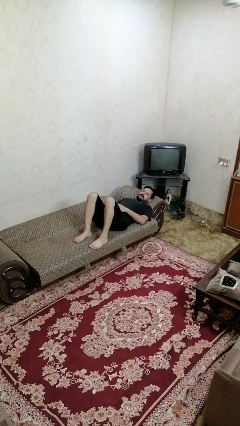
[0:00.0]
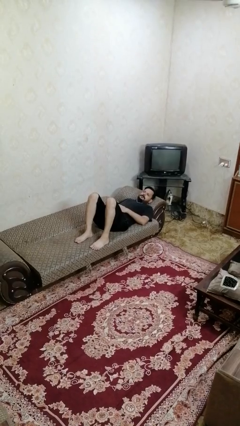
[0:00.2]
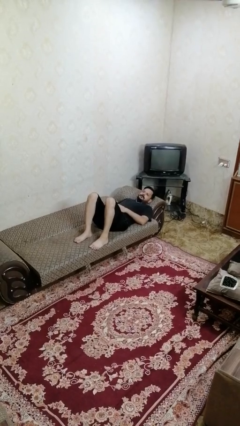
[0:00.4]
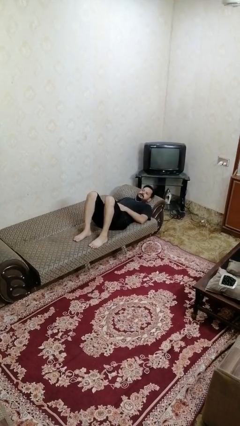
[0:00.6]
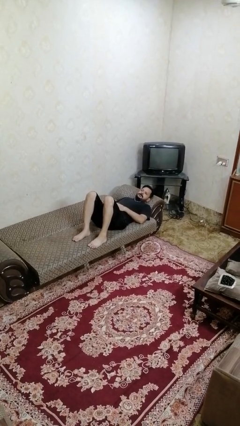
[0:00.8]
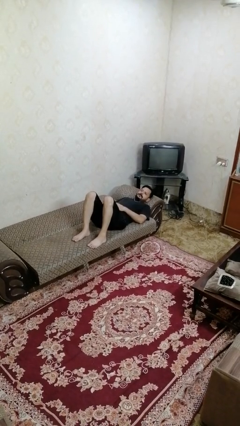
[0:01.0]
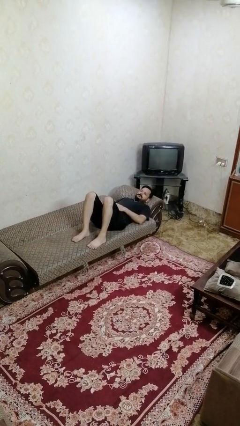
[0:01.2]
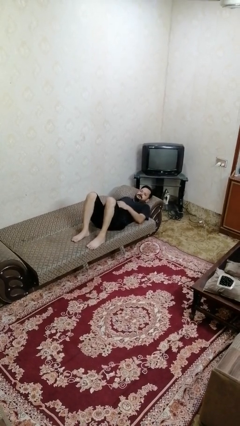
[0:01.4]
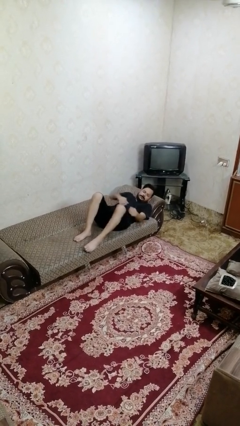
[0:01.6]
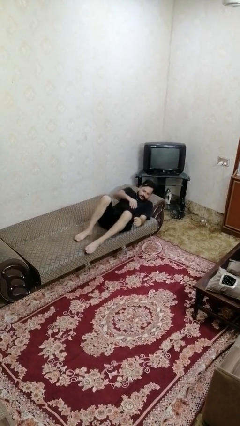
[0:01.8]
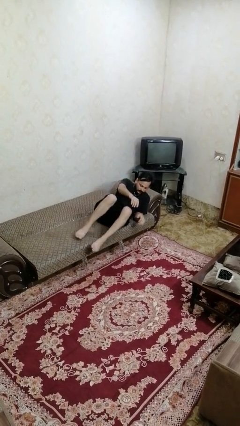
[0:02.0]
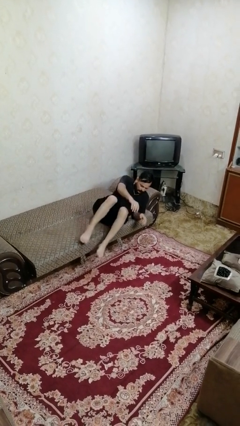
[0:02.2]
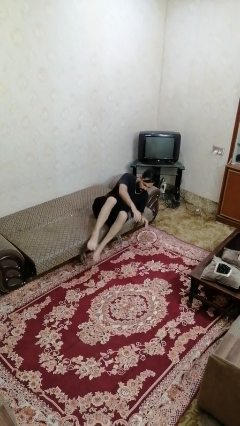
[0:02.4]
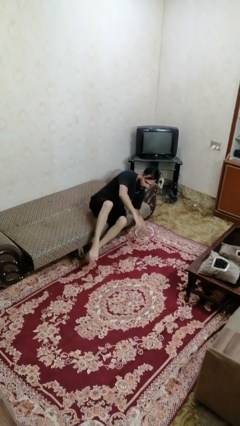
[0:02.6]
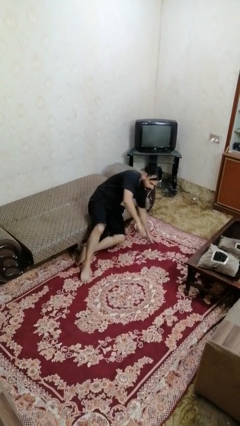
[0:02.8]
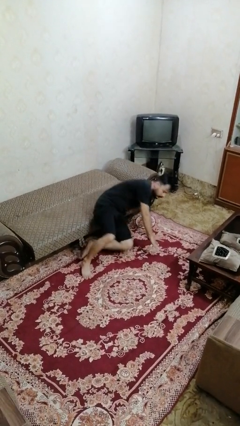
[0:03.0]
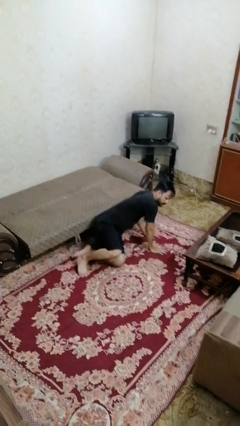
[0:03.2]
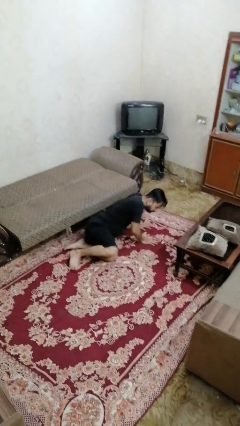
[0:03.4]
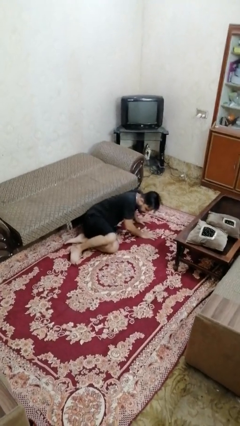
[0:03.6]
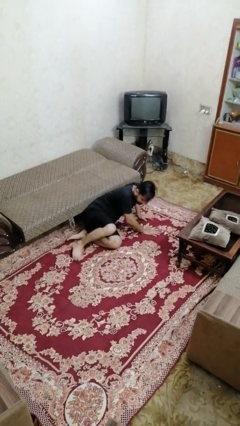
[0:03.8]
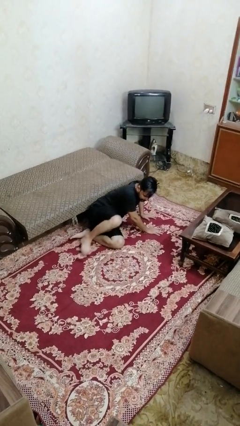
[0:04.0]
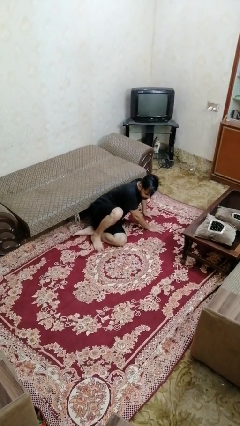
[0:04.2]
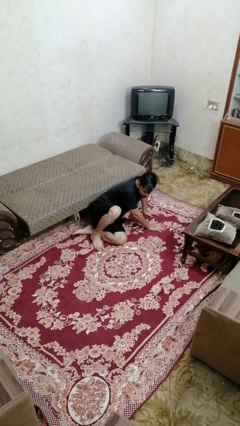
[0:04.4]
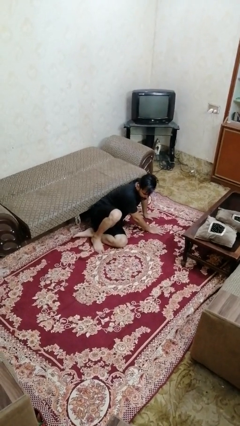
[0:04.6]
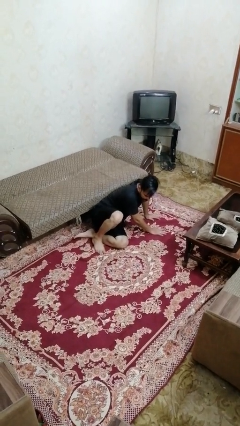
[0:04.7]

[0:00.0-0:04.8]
person falls from bed

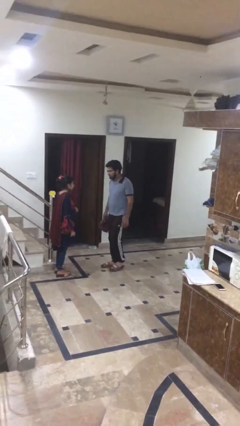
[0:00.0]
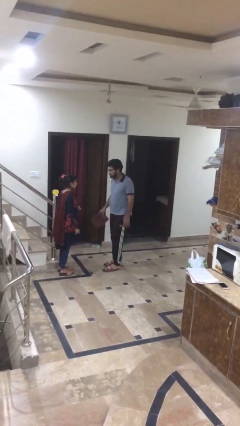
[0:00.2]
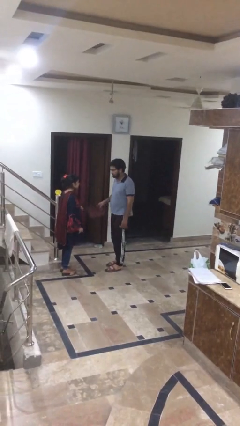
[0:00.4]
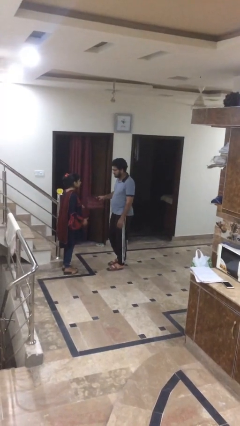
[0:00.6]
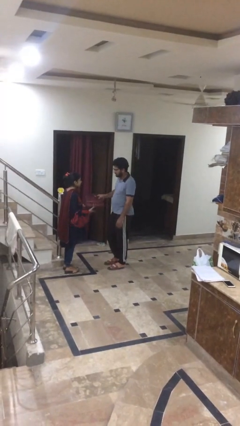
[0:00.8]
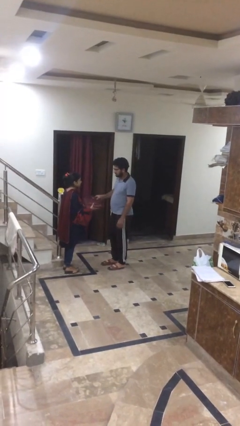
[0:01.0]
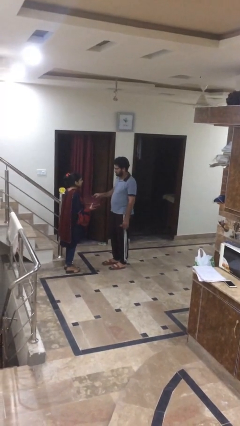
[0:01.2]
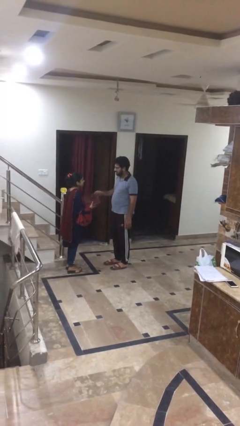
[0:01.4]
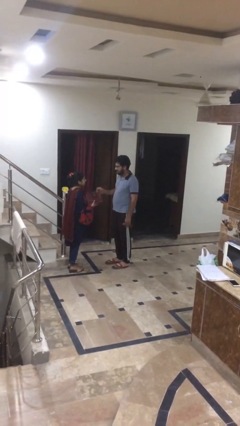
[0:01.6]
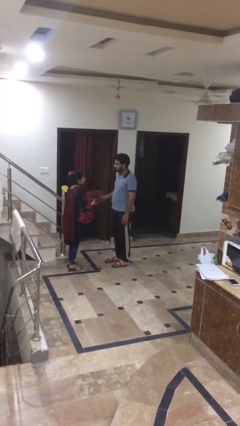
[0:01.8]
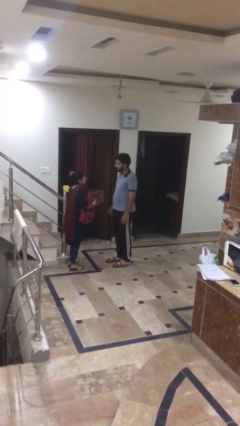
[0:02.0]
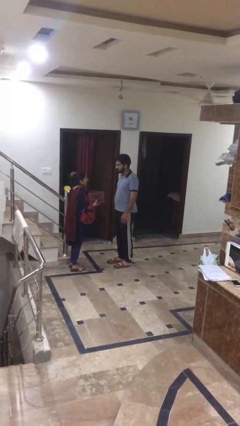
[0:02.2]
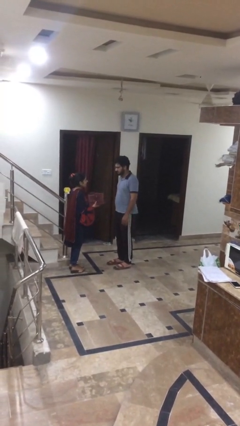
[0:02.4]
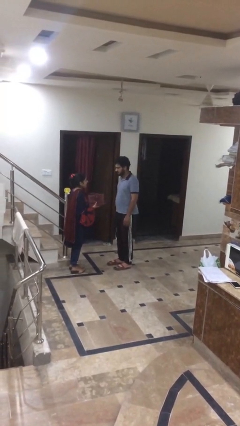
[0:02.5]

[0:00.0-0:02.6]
person transfers object to person

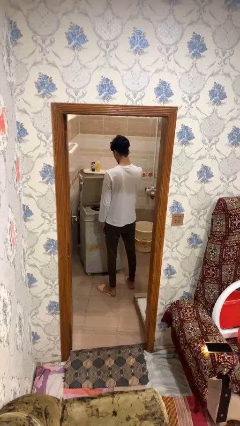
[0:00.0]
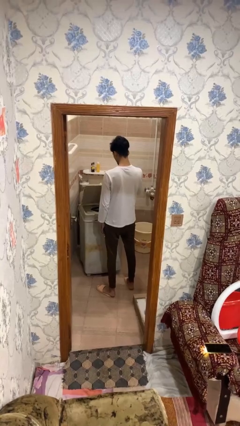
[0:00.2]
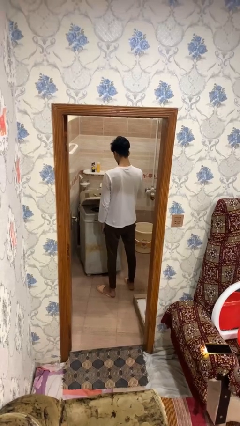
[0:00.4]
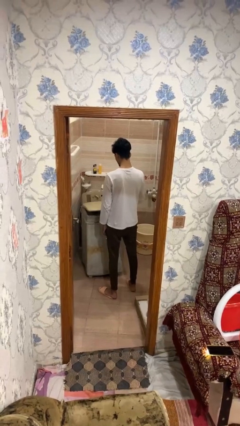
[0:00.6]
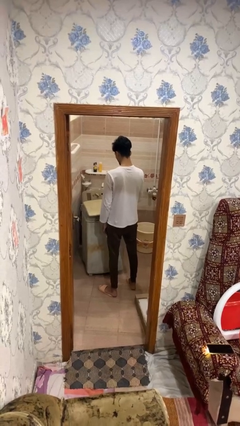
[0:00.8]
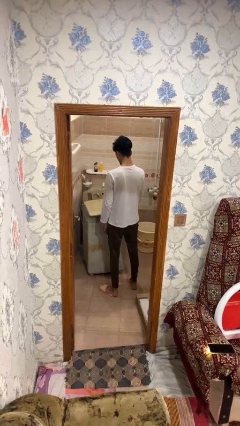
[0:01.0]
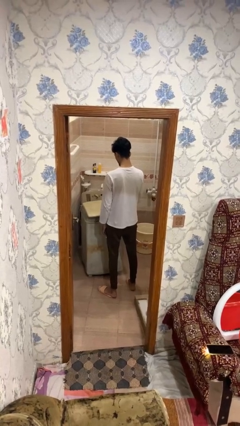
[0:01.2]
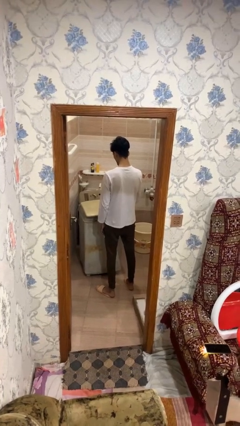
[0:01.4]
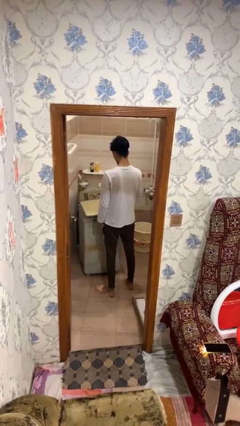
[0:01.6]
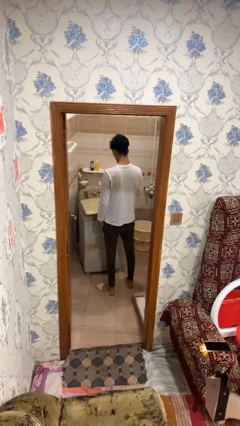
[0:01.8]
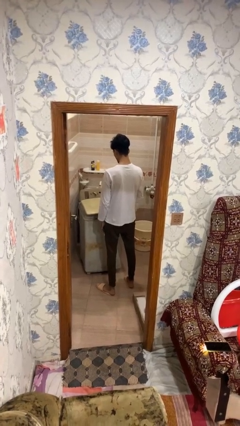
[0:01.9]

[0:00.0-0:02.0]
person closes clothes washer

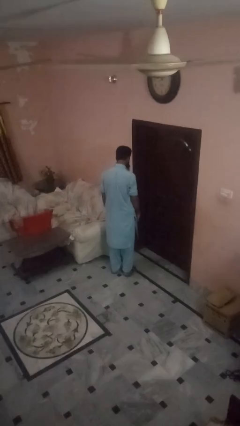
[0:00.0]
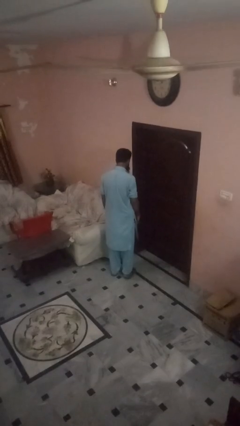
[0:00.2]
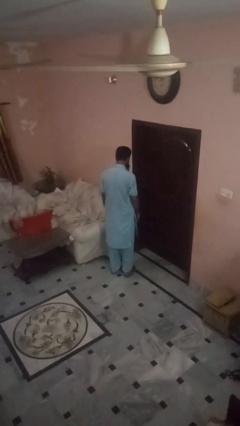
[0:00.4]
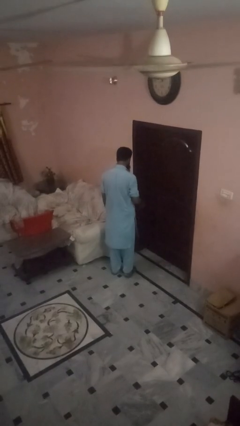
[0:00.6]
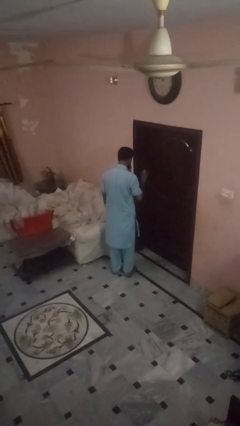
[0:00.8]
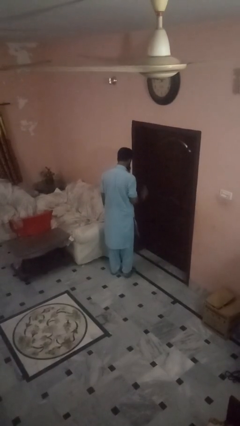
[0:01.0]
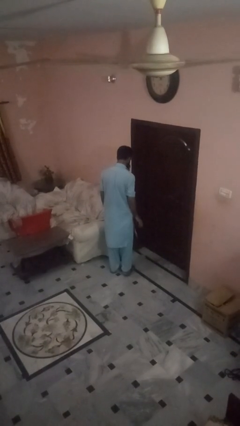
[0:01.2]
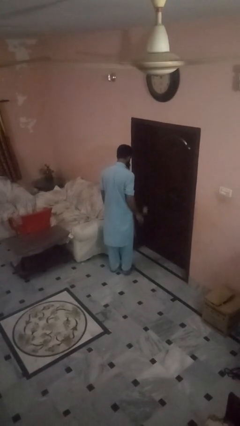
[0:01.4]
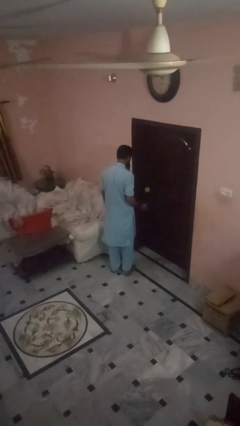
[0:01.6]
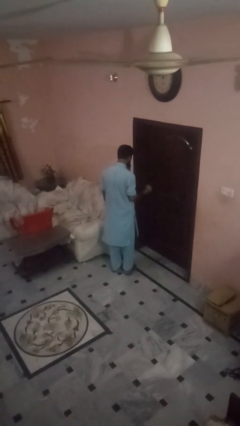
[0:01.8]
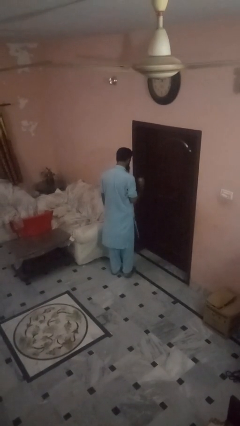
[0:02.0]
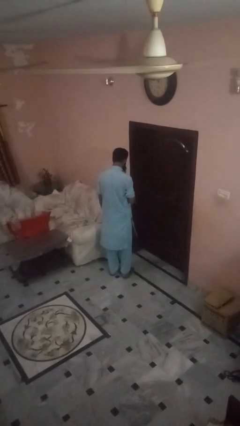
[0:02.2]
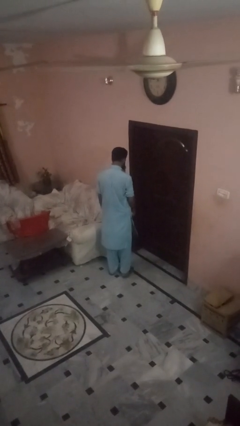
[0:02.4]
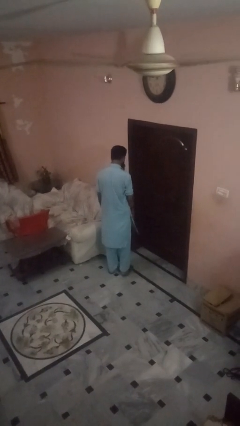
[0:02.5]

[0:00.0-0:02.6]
person bounces ball on floor

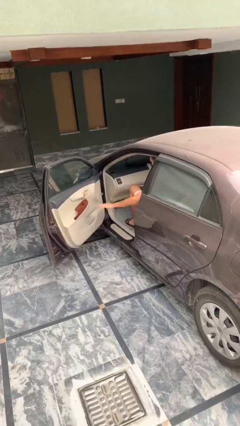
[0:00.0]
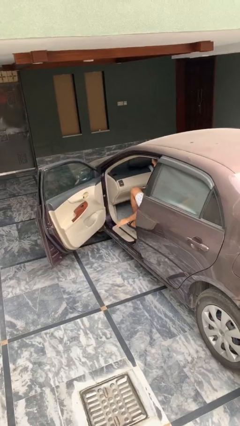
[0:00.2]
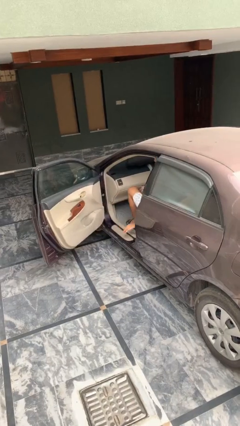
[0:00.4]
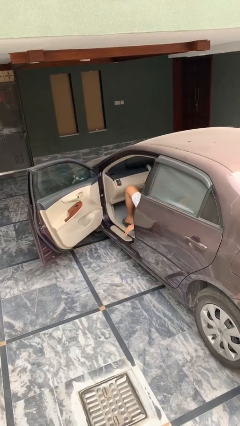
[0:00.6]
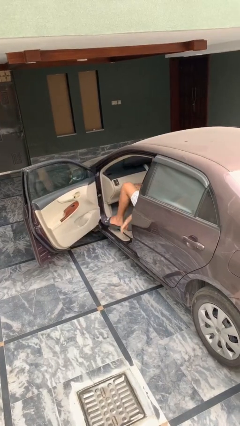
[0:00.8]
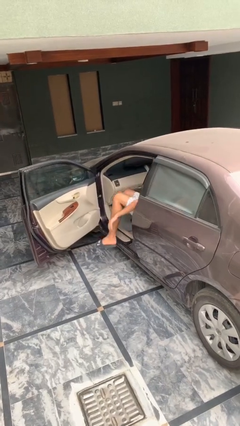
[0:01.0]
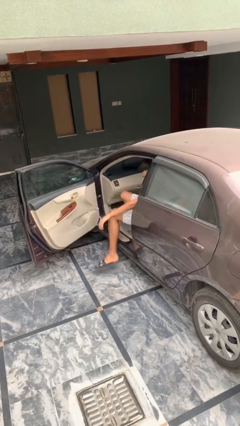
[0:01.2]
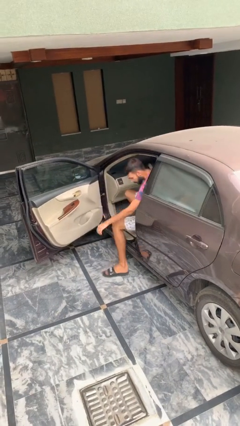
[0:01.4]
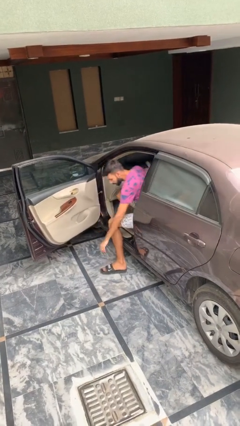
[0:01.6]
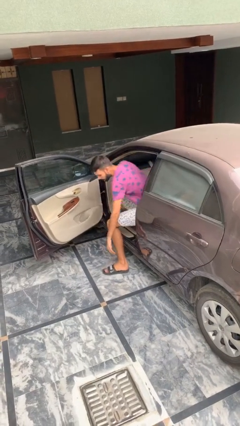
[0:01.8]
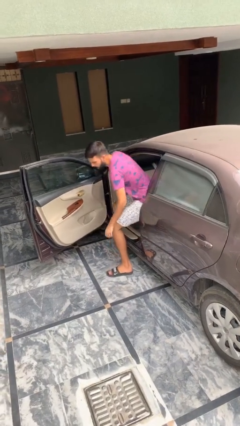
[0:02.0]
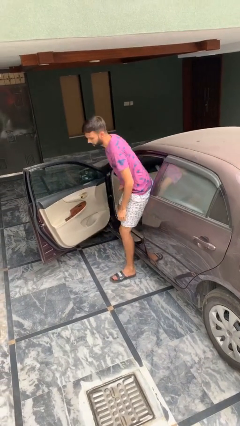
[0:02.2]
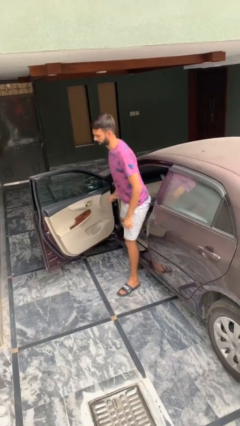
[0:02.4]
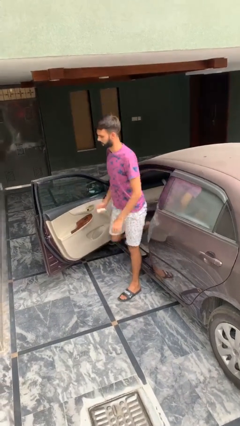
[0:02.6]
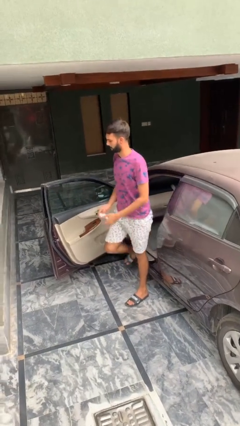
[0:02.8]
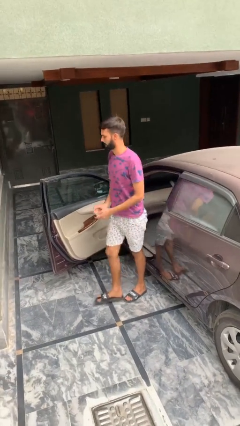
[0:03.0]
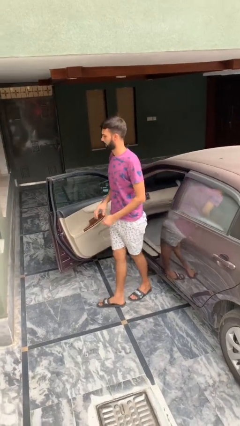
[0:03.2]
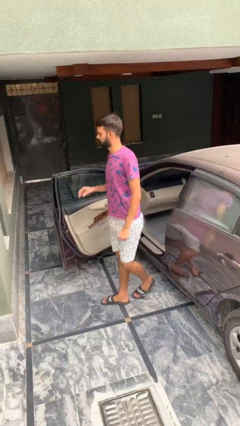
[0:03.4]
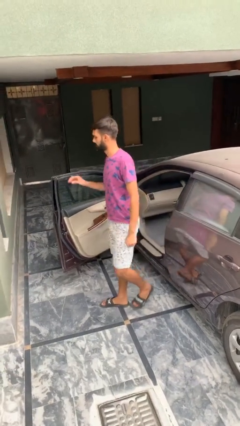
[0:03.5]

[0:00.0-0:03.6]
person exits car

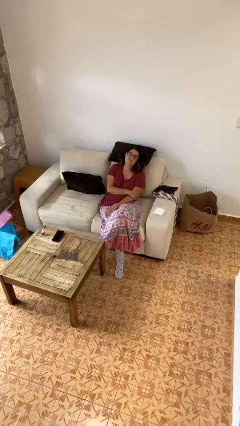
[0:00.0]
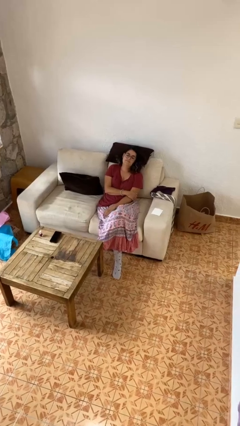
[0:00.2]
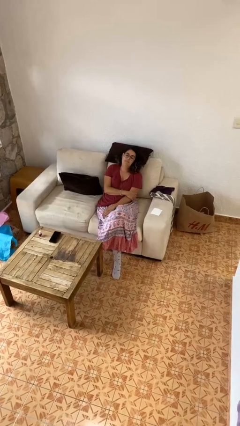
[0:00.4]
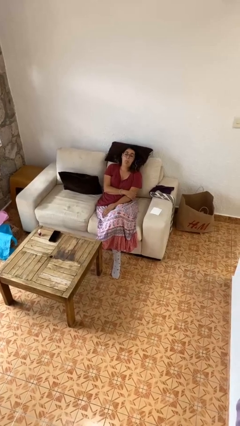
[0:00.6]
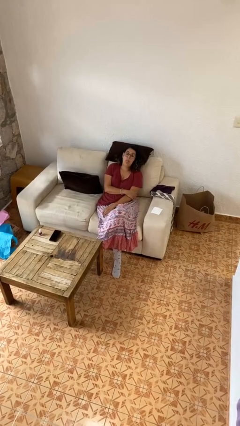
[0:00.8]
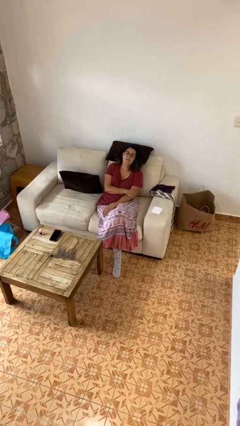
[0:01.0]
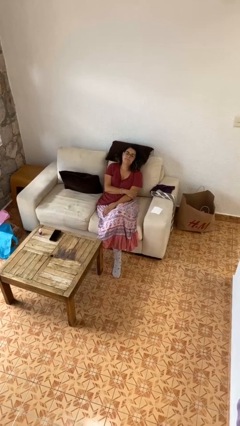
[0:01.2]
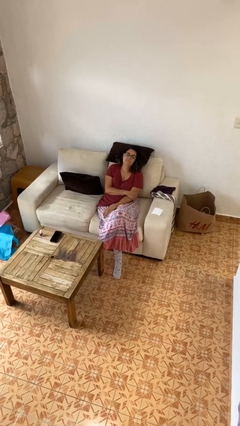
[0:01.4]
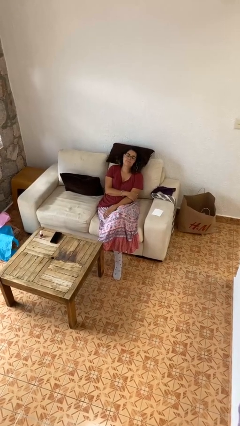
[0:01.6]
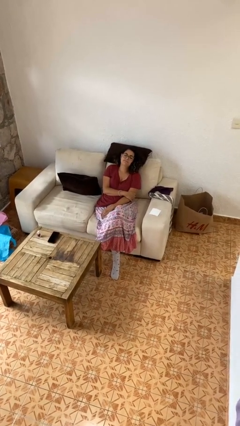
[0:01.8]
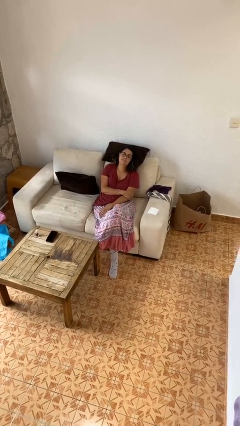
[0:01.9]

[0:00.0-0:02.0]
person sticks out tongue
